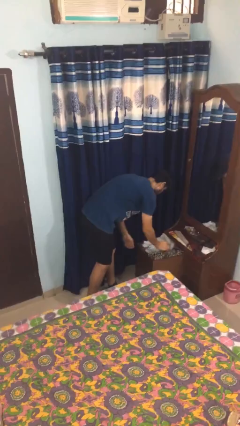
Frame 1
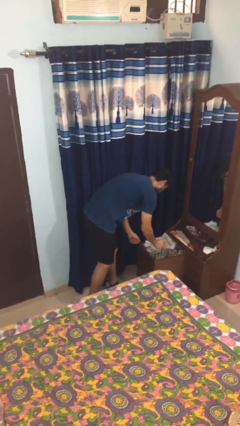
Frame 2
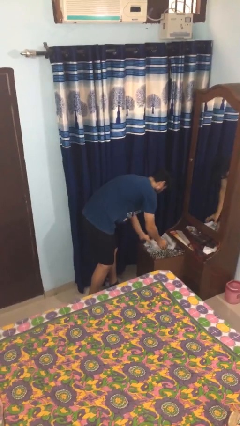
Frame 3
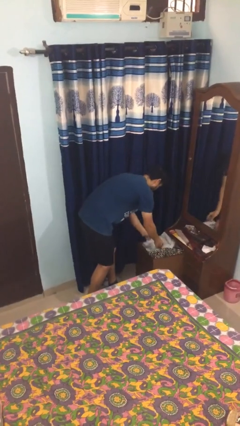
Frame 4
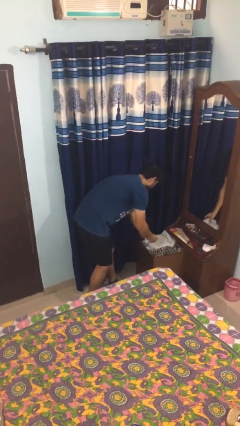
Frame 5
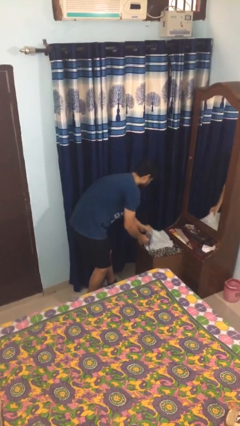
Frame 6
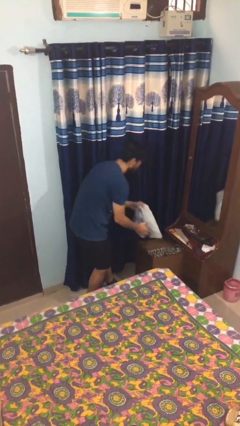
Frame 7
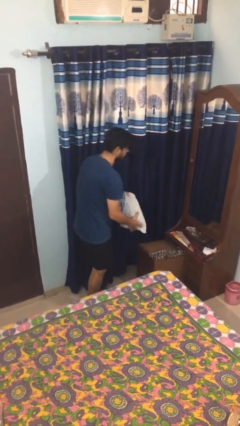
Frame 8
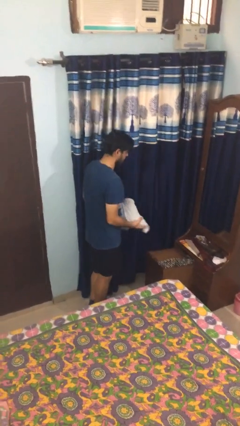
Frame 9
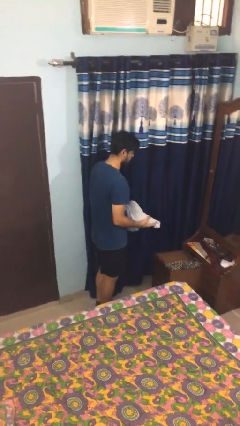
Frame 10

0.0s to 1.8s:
person takes clothes from dresser

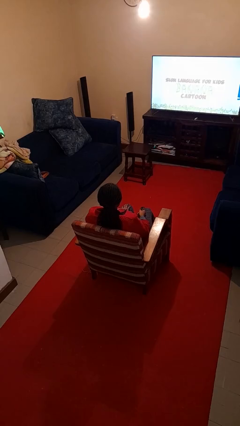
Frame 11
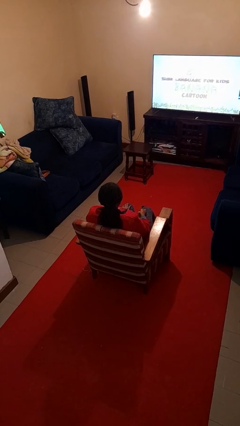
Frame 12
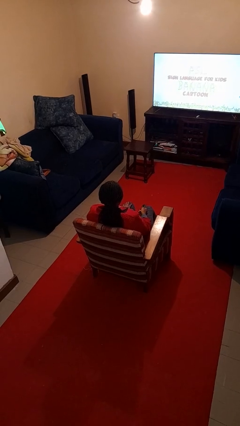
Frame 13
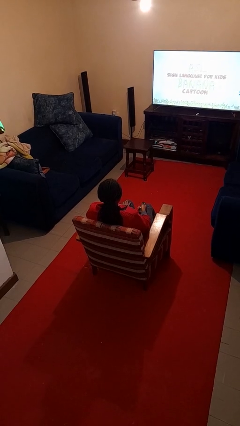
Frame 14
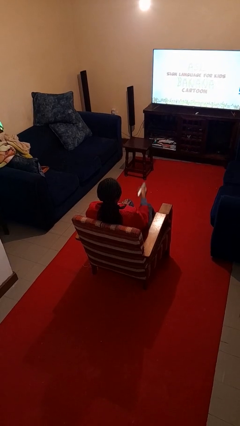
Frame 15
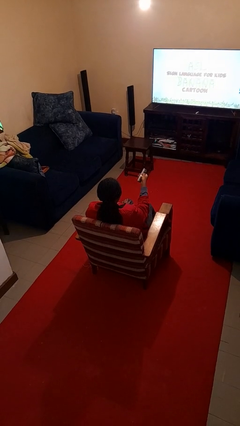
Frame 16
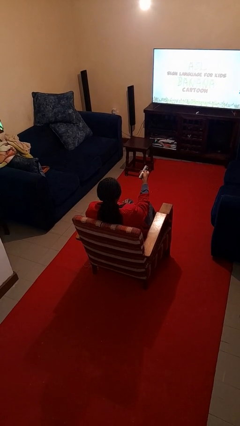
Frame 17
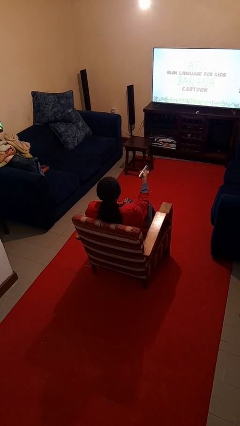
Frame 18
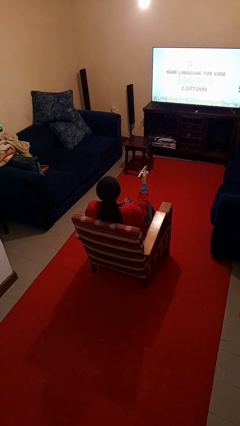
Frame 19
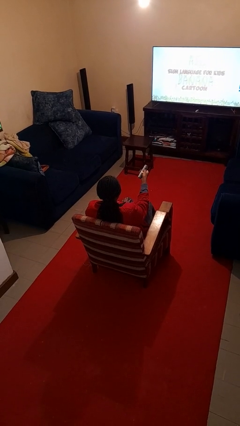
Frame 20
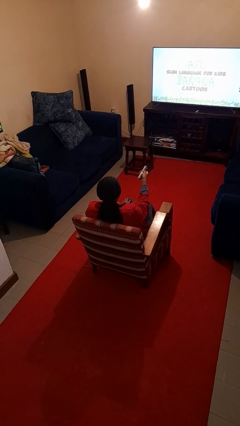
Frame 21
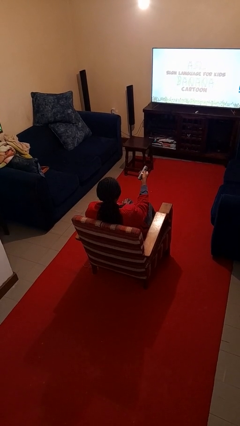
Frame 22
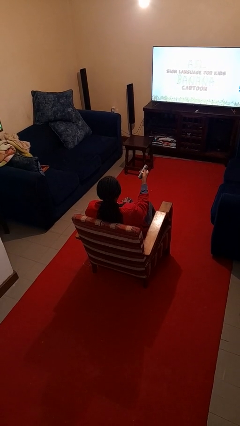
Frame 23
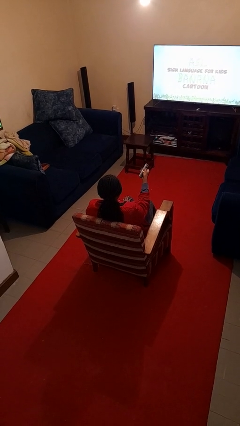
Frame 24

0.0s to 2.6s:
person uses television remote

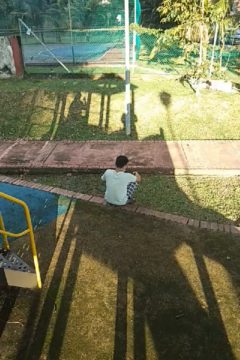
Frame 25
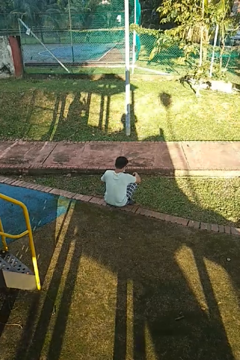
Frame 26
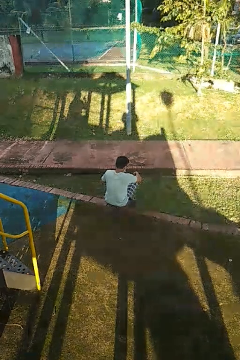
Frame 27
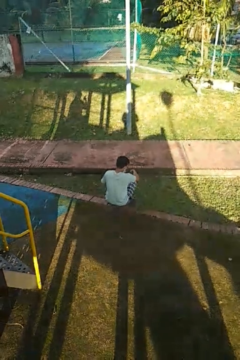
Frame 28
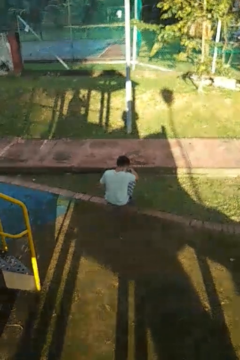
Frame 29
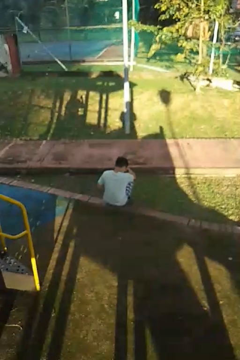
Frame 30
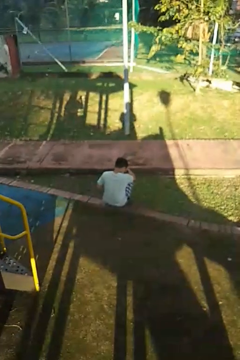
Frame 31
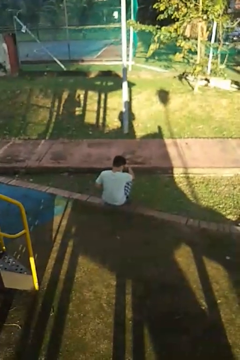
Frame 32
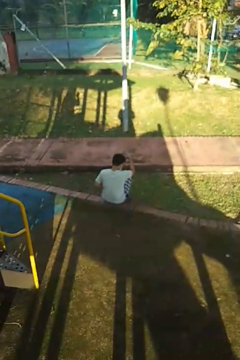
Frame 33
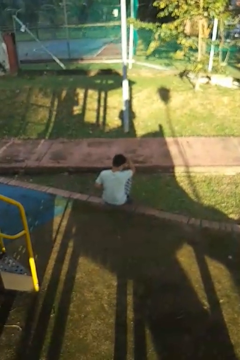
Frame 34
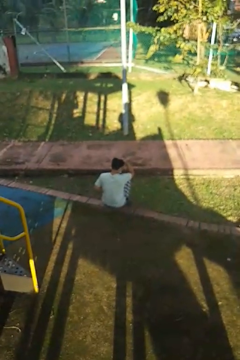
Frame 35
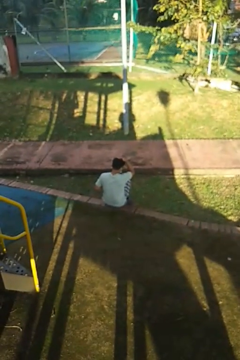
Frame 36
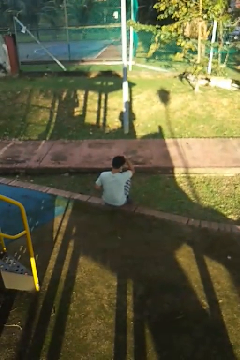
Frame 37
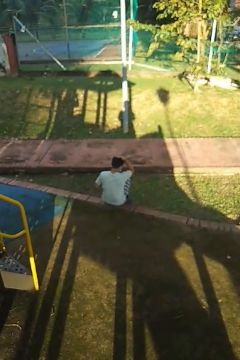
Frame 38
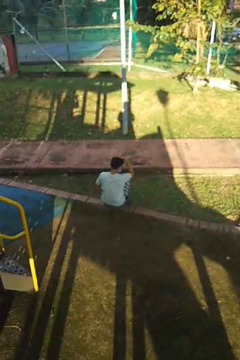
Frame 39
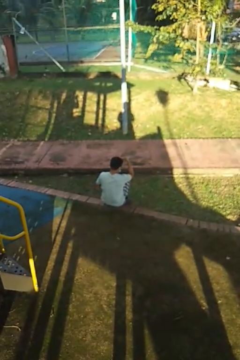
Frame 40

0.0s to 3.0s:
person pats head

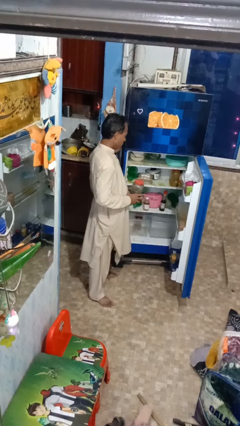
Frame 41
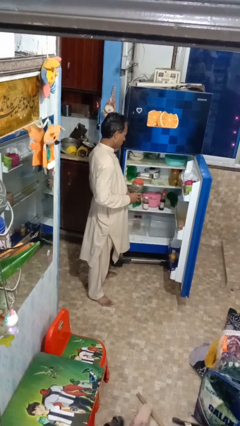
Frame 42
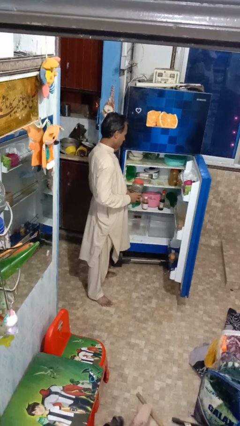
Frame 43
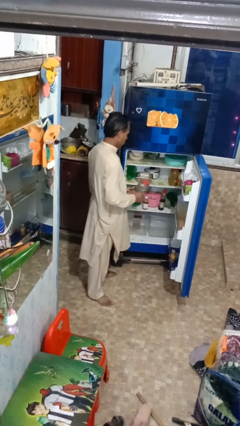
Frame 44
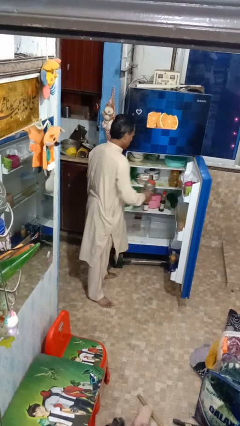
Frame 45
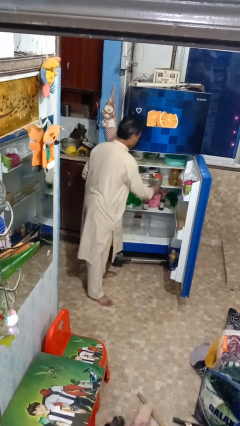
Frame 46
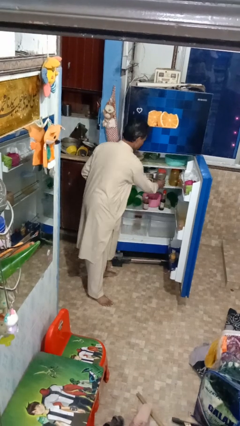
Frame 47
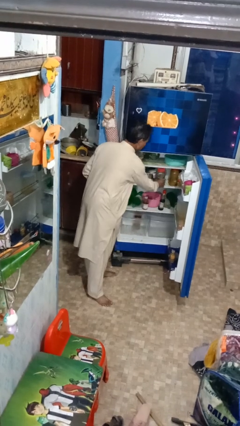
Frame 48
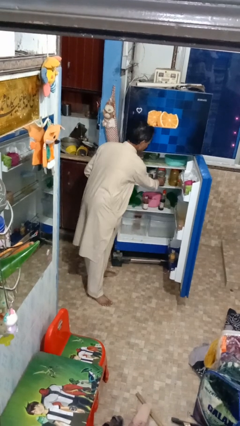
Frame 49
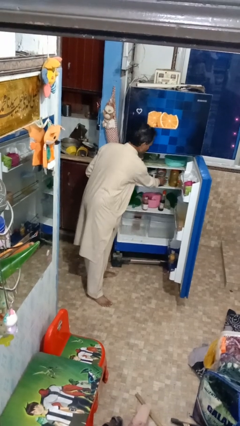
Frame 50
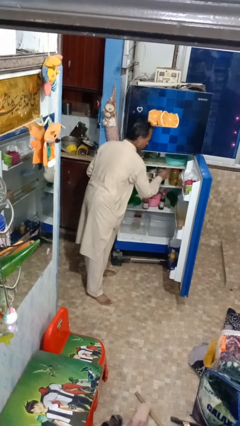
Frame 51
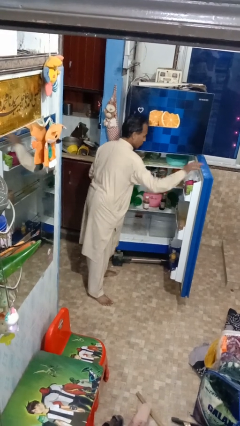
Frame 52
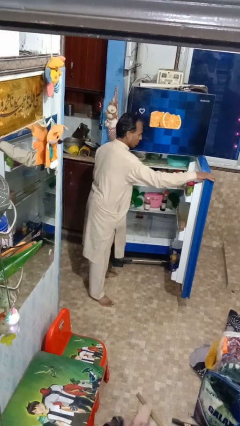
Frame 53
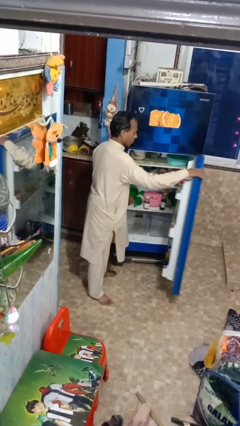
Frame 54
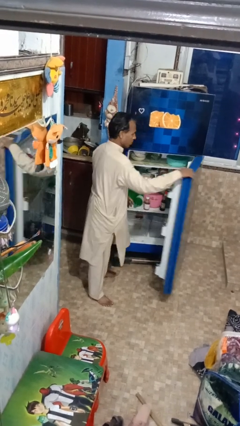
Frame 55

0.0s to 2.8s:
person takes object from refrigerator

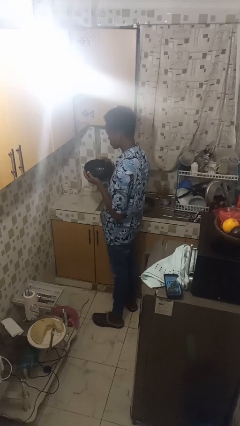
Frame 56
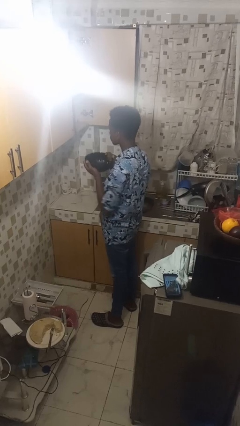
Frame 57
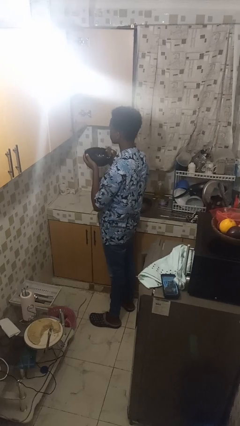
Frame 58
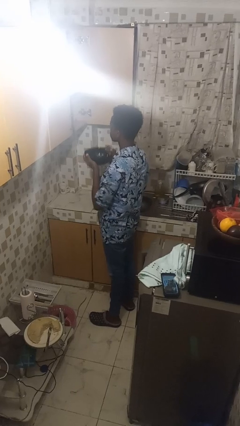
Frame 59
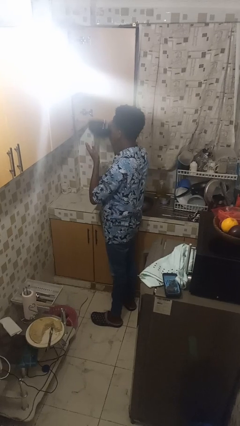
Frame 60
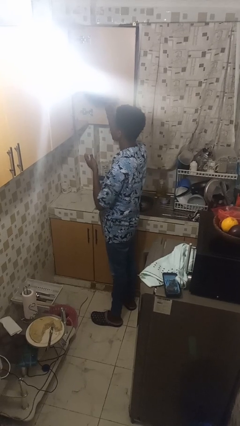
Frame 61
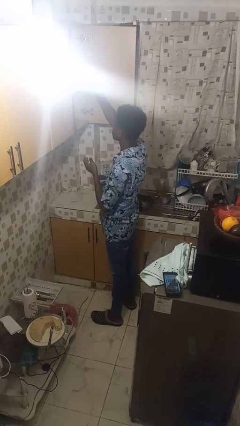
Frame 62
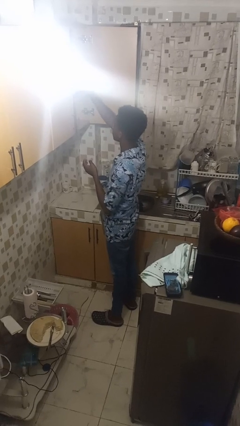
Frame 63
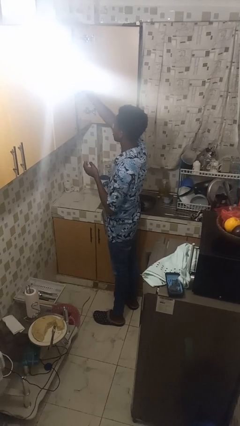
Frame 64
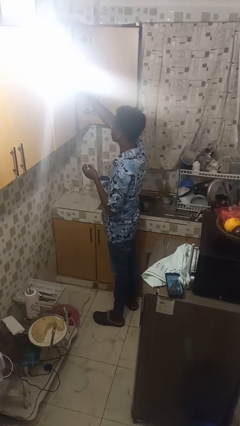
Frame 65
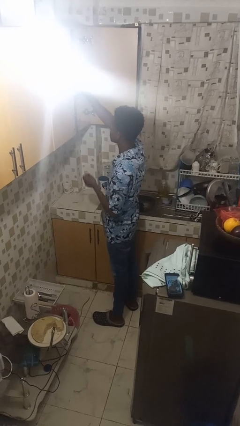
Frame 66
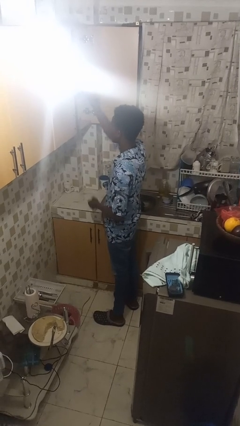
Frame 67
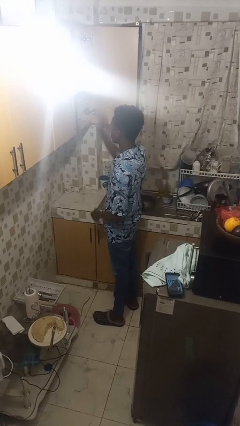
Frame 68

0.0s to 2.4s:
person puts down object into cabinet

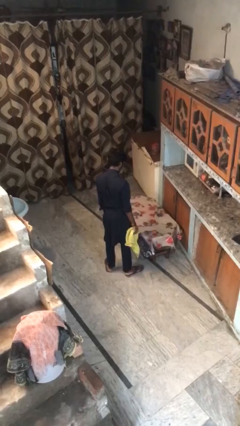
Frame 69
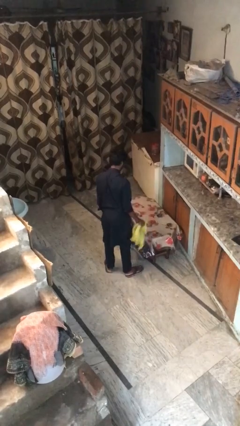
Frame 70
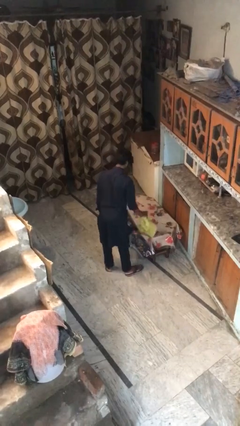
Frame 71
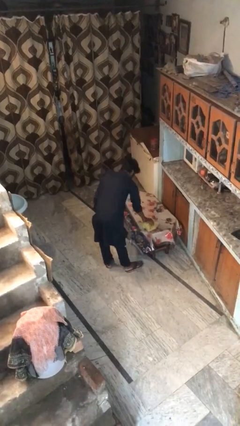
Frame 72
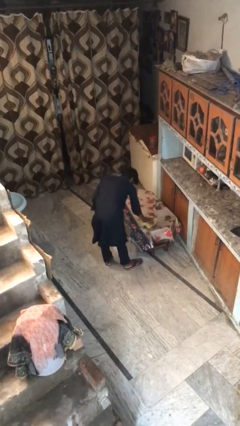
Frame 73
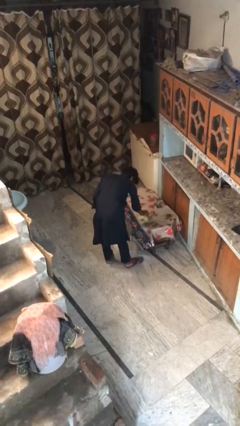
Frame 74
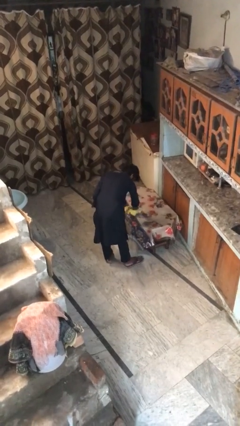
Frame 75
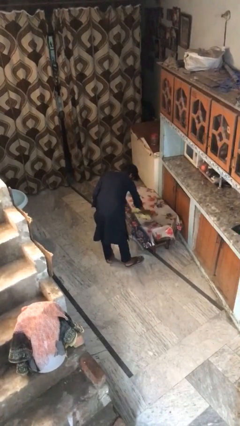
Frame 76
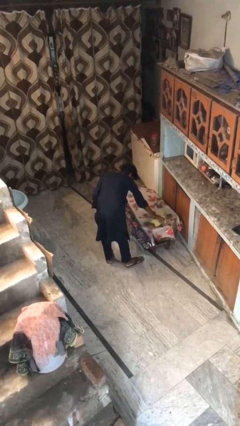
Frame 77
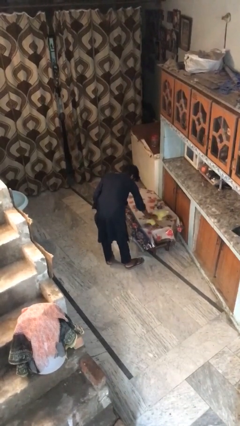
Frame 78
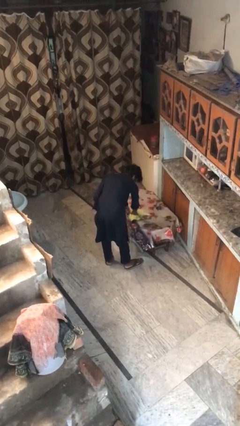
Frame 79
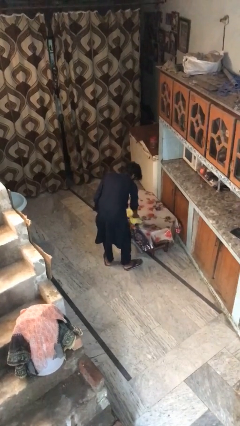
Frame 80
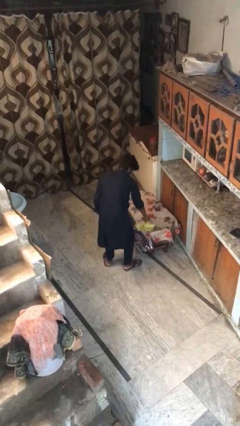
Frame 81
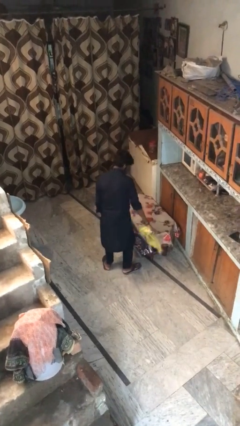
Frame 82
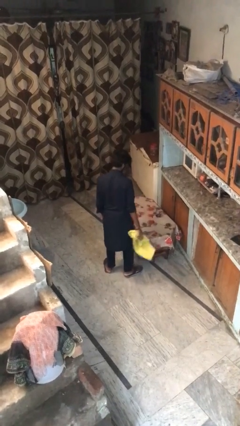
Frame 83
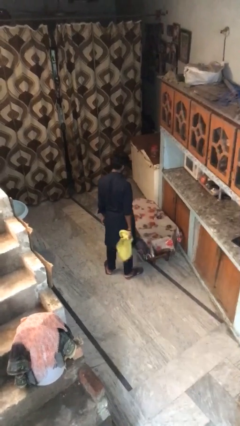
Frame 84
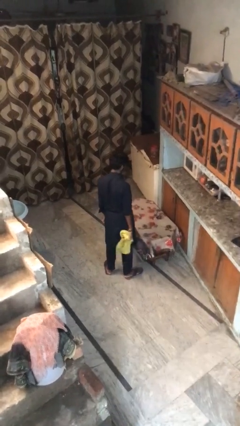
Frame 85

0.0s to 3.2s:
person cleans table with rag

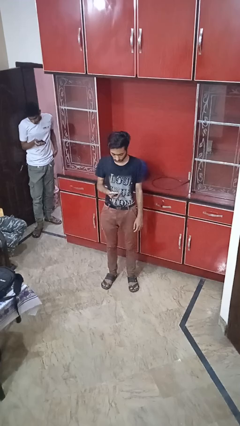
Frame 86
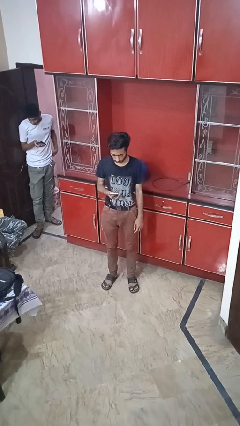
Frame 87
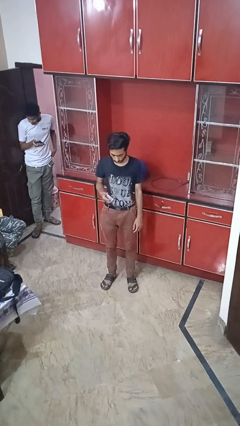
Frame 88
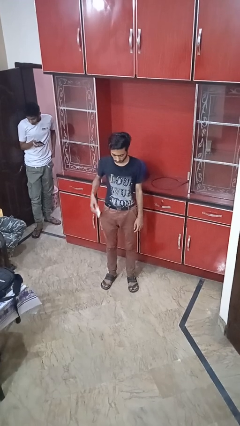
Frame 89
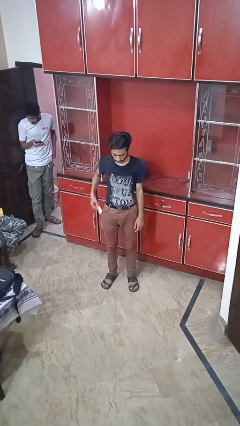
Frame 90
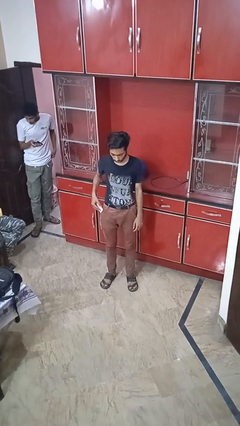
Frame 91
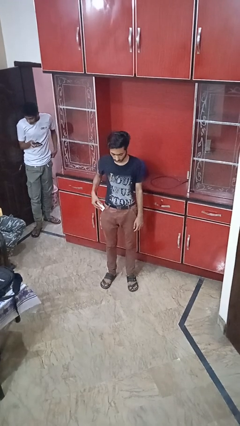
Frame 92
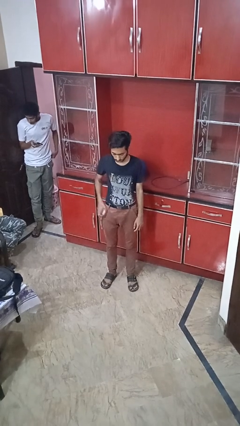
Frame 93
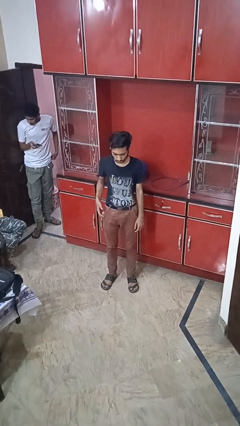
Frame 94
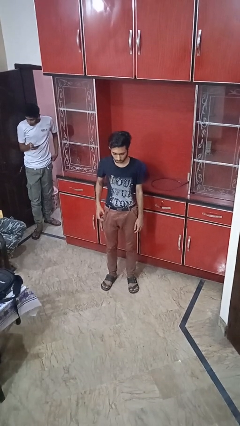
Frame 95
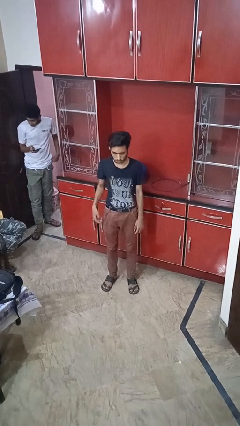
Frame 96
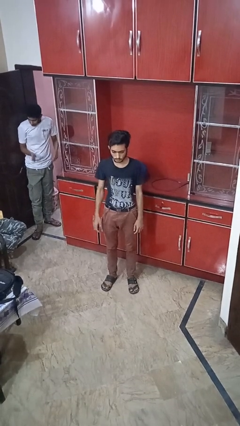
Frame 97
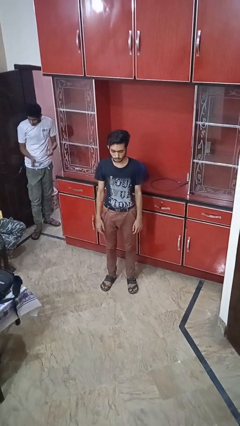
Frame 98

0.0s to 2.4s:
person puts phone into pocket
